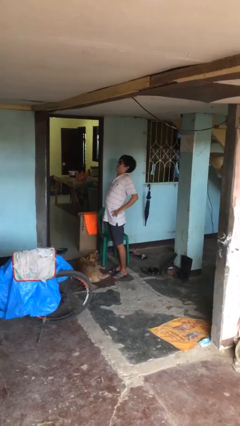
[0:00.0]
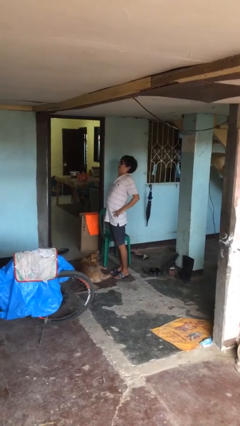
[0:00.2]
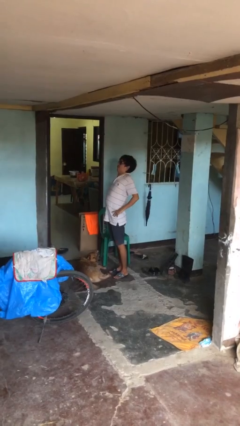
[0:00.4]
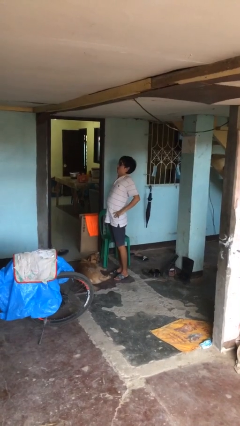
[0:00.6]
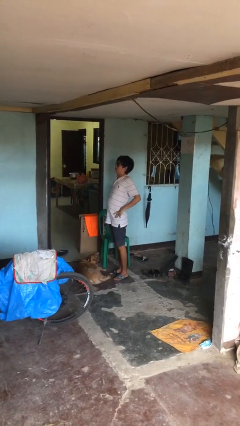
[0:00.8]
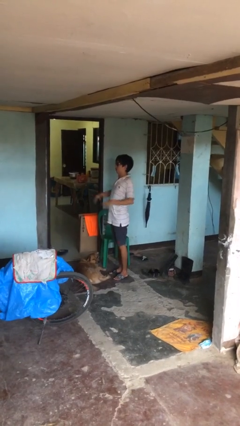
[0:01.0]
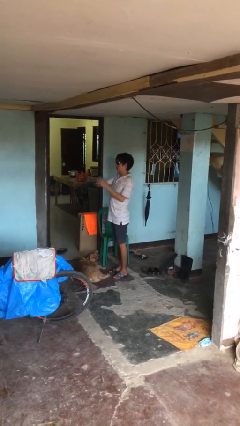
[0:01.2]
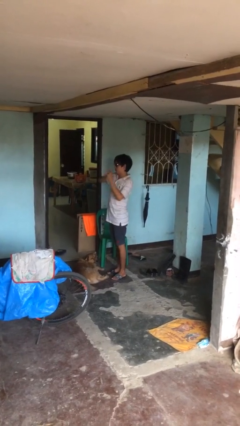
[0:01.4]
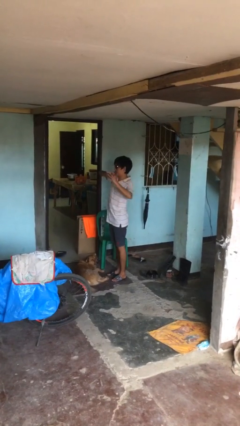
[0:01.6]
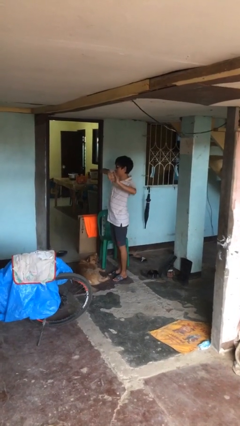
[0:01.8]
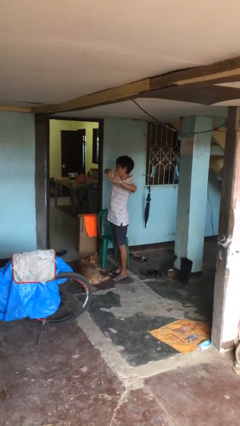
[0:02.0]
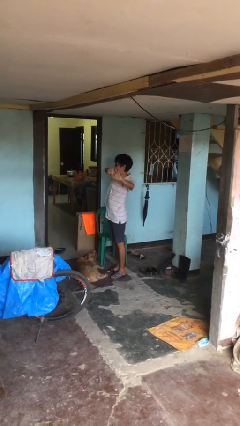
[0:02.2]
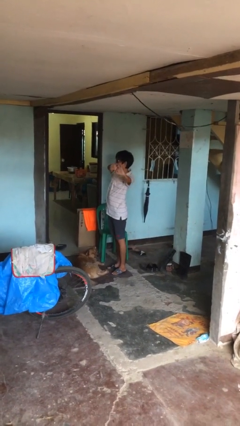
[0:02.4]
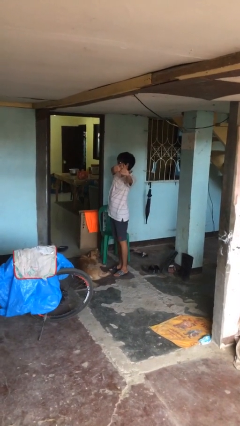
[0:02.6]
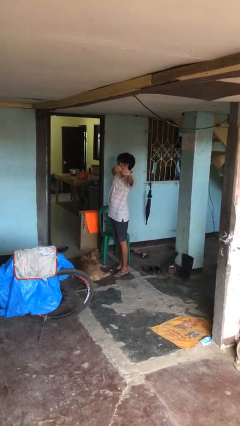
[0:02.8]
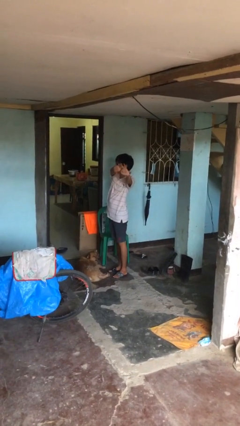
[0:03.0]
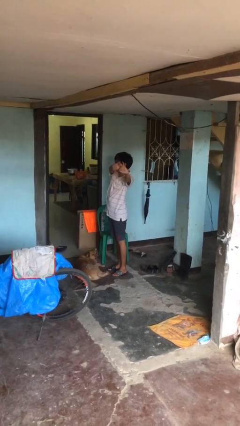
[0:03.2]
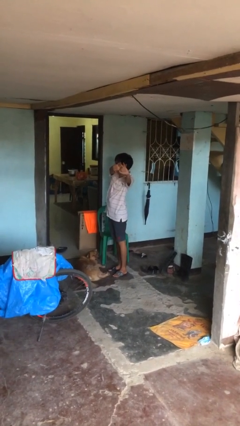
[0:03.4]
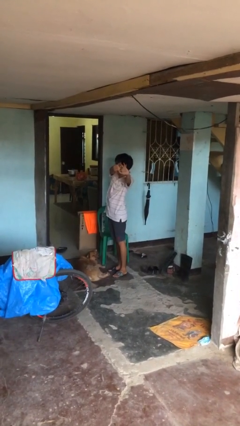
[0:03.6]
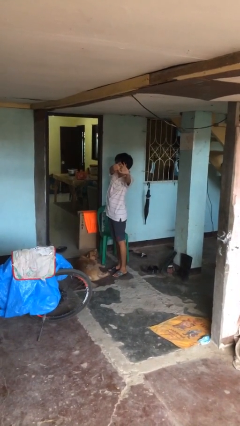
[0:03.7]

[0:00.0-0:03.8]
person stretches arms to side

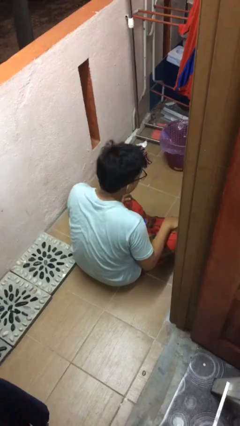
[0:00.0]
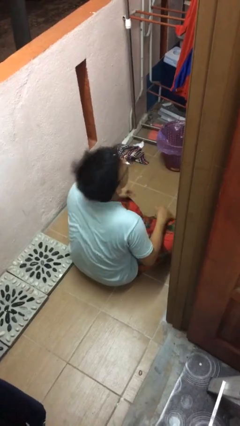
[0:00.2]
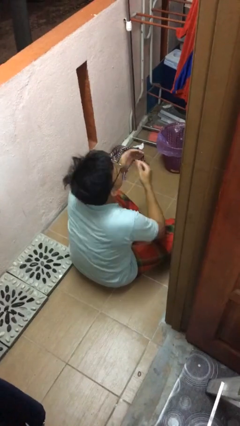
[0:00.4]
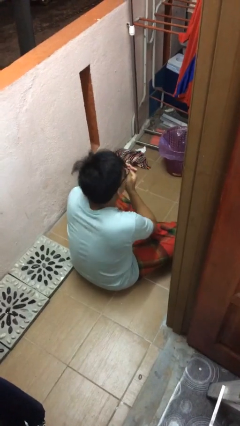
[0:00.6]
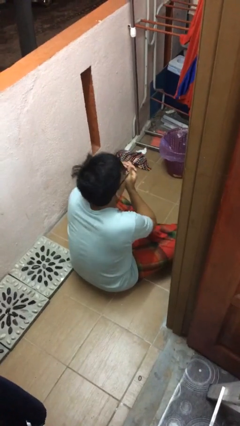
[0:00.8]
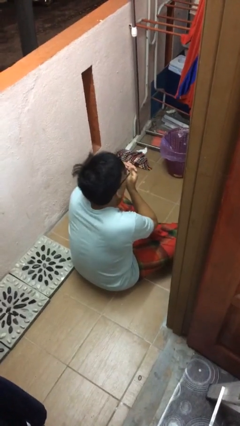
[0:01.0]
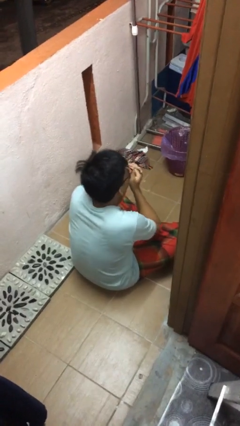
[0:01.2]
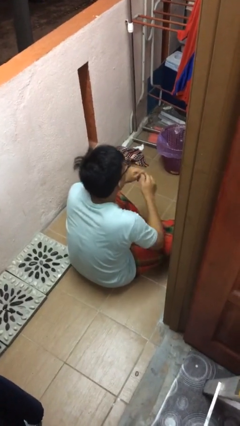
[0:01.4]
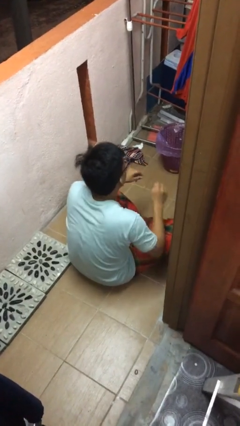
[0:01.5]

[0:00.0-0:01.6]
person sneezes into hand

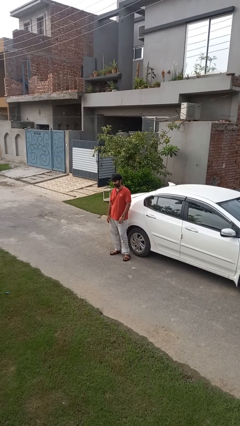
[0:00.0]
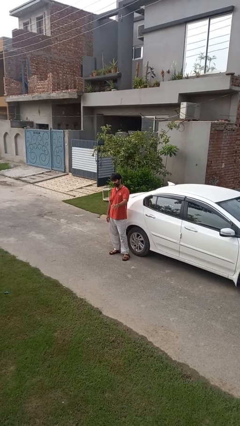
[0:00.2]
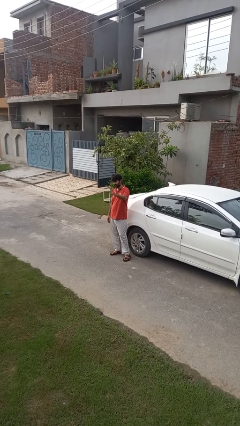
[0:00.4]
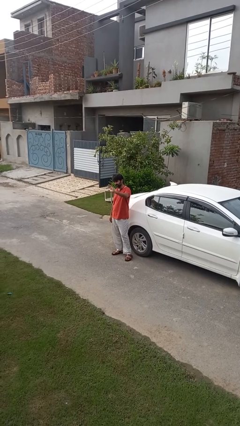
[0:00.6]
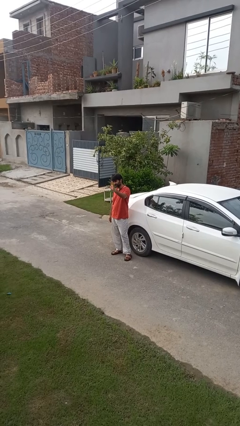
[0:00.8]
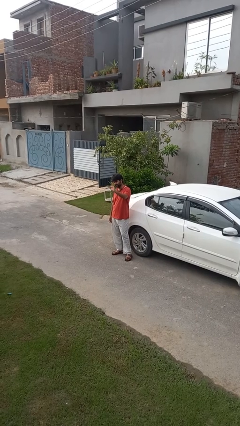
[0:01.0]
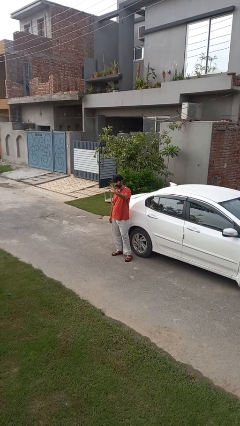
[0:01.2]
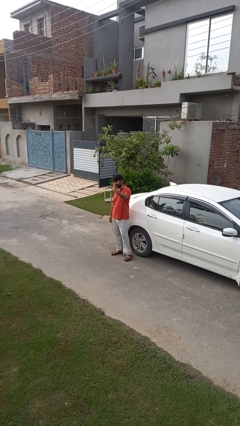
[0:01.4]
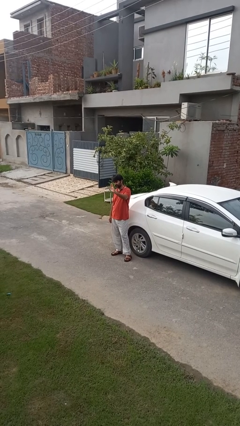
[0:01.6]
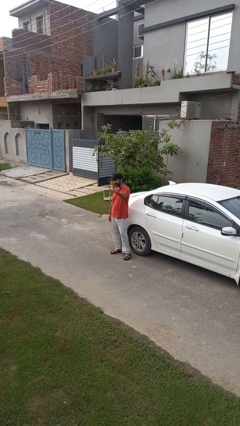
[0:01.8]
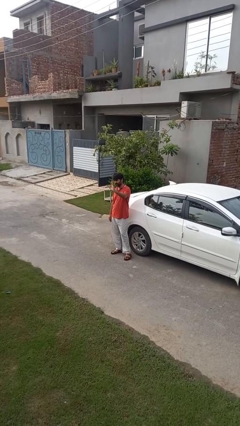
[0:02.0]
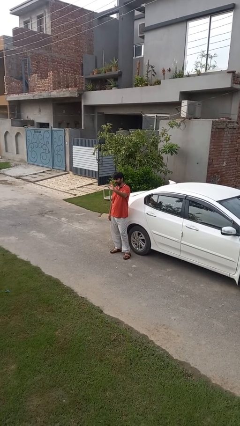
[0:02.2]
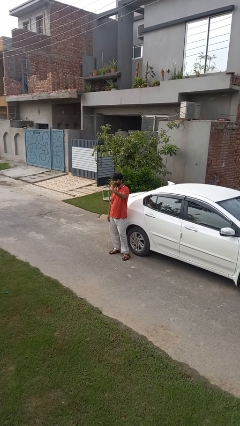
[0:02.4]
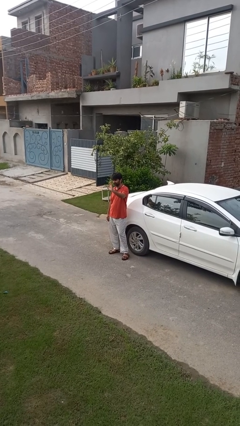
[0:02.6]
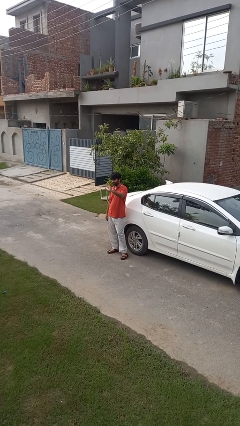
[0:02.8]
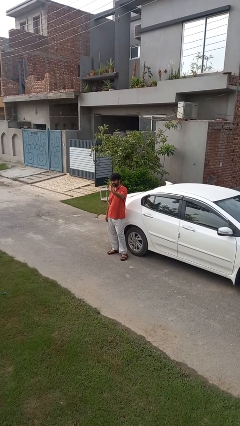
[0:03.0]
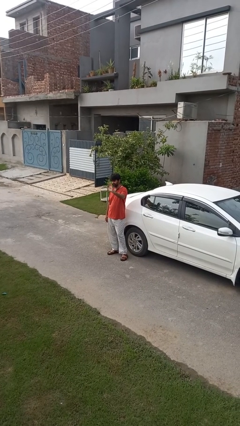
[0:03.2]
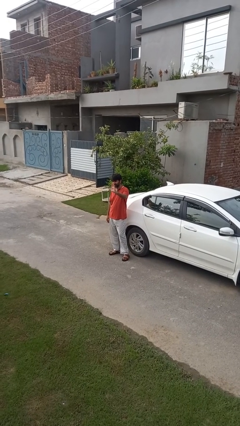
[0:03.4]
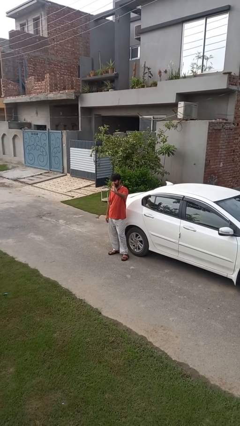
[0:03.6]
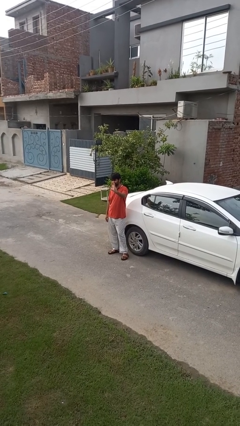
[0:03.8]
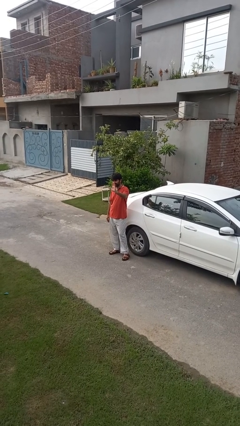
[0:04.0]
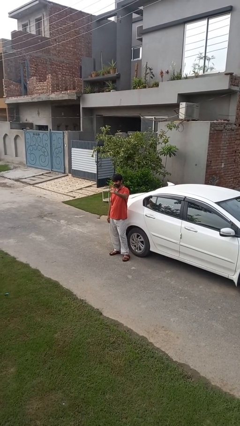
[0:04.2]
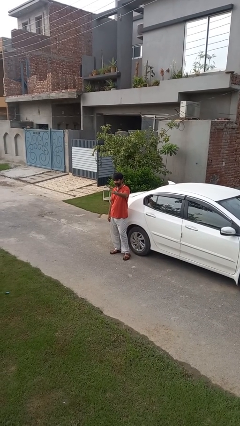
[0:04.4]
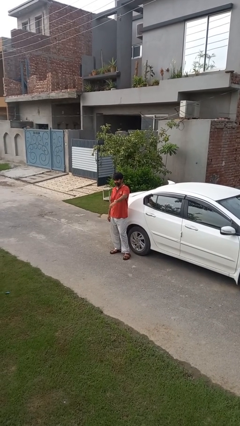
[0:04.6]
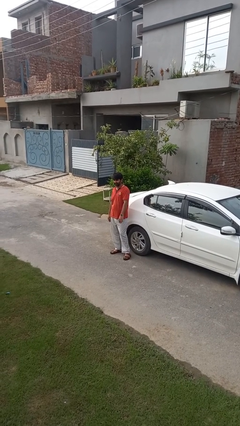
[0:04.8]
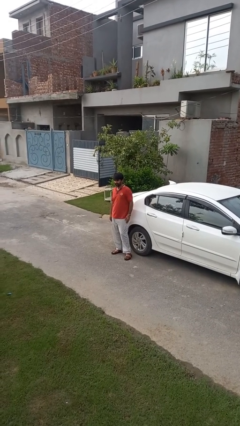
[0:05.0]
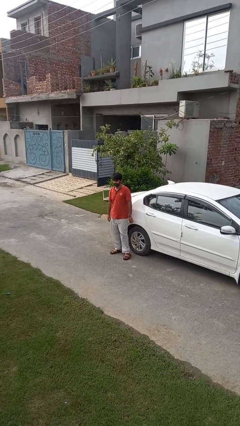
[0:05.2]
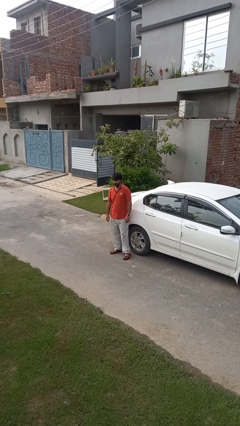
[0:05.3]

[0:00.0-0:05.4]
person waves at person

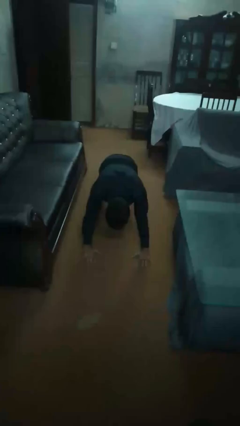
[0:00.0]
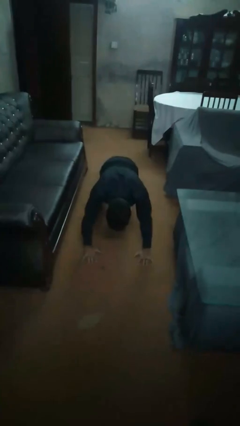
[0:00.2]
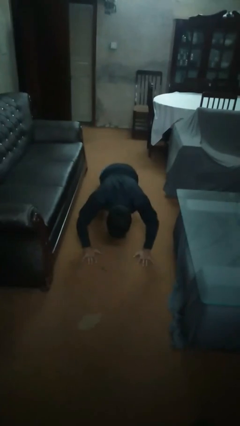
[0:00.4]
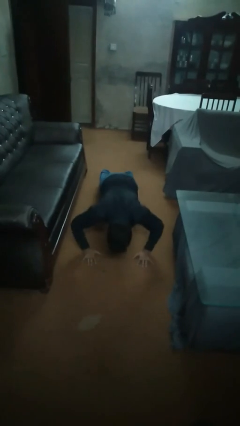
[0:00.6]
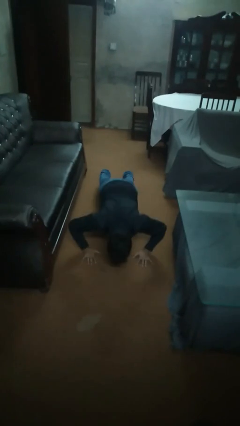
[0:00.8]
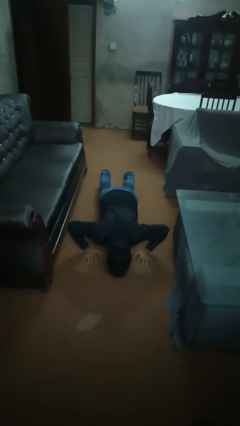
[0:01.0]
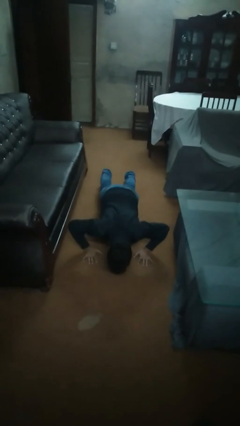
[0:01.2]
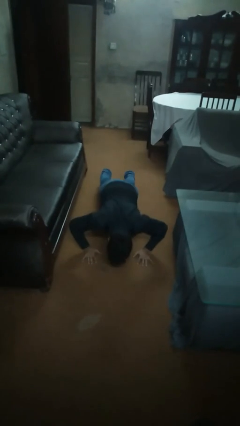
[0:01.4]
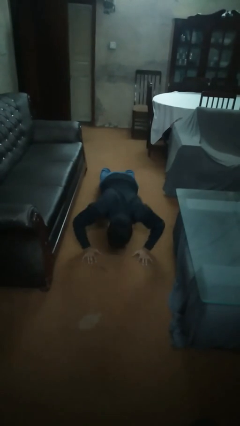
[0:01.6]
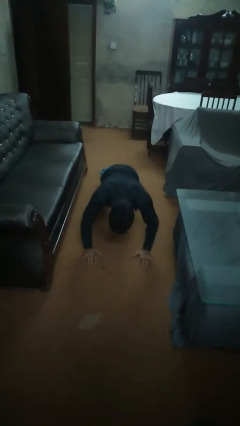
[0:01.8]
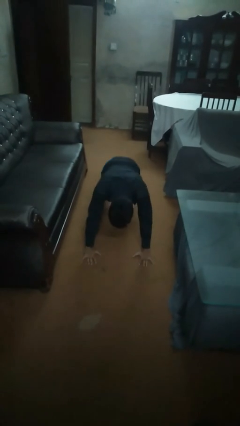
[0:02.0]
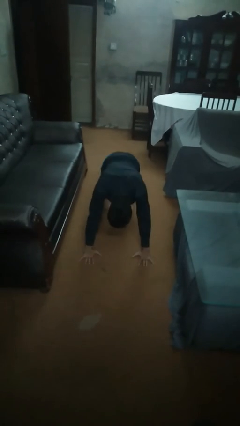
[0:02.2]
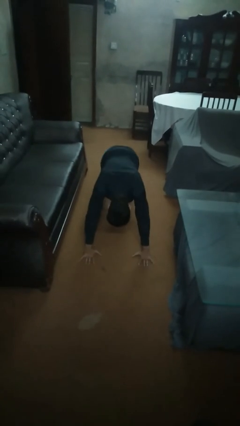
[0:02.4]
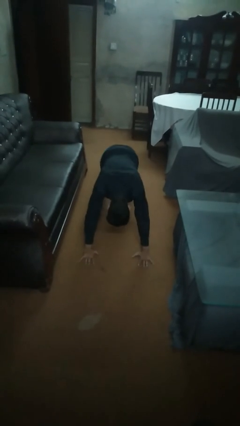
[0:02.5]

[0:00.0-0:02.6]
person exercises with pushup

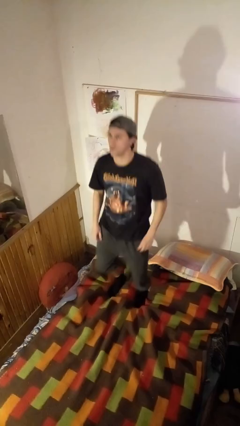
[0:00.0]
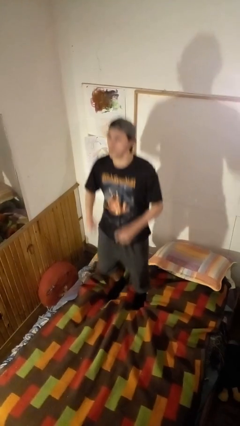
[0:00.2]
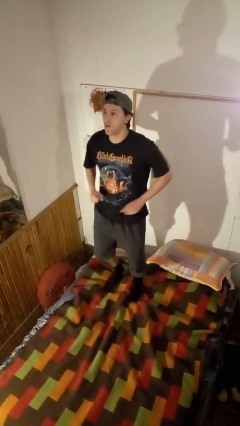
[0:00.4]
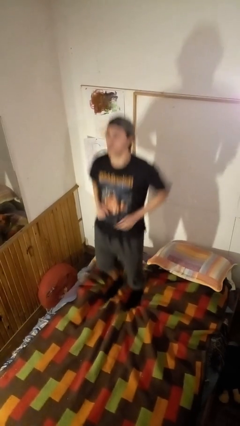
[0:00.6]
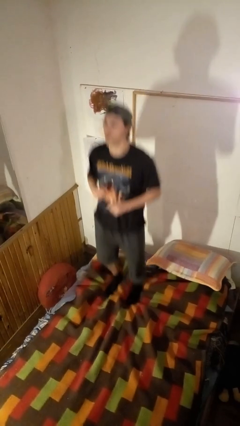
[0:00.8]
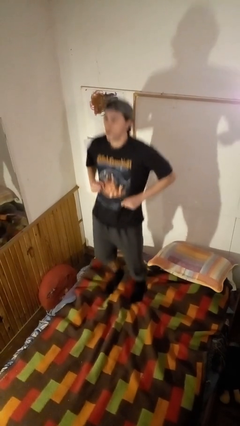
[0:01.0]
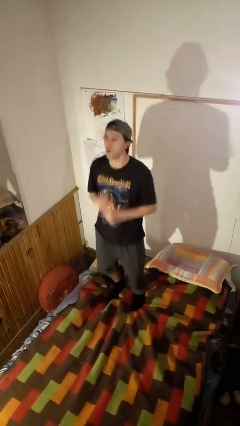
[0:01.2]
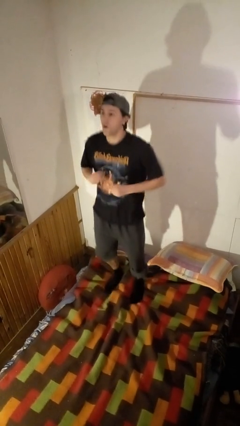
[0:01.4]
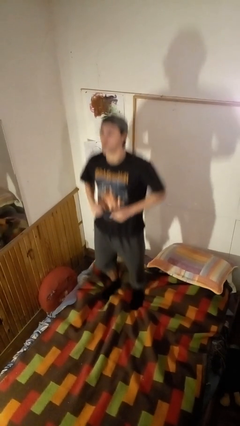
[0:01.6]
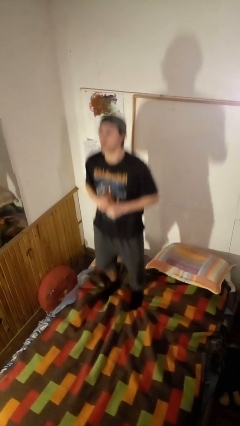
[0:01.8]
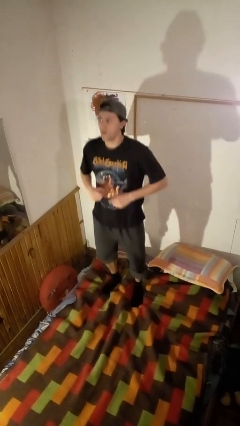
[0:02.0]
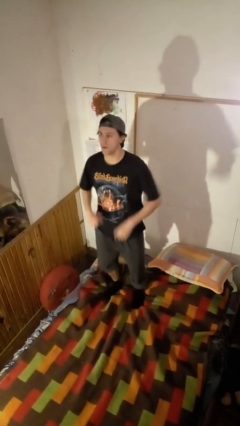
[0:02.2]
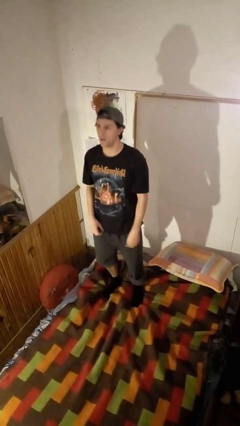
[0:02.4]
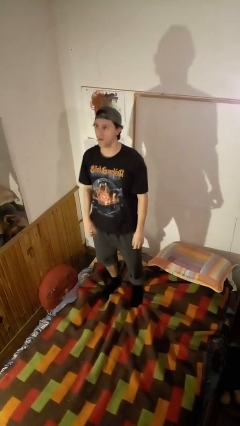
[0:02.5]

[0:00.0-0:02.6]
person jumps on bed

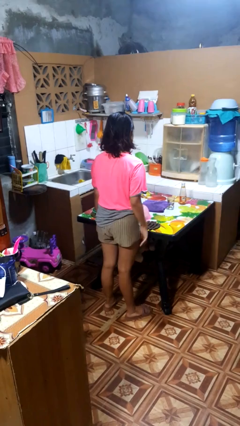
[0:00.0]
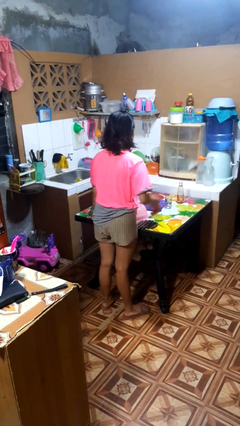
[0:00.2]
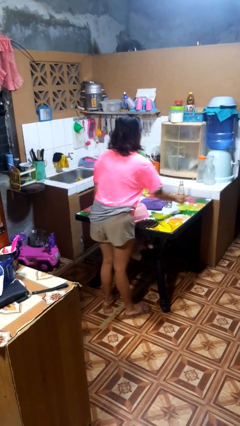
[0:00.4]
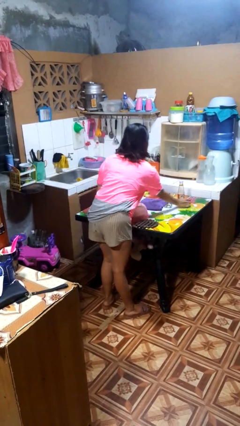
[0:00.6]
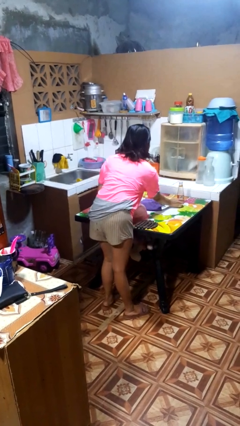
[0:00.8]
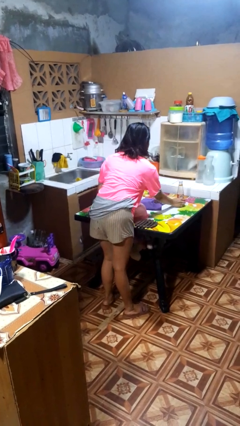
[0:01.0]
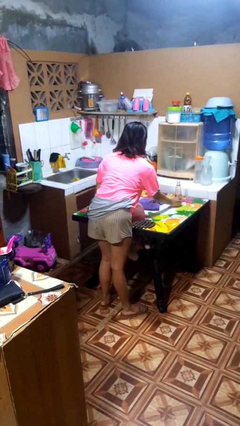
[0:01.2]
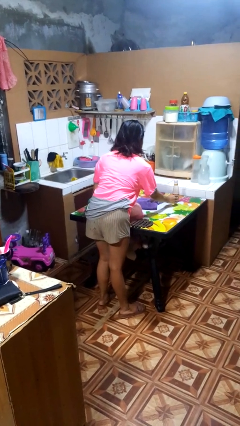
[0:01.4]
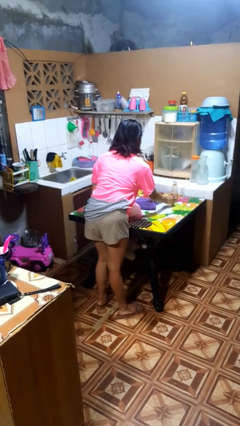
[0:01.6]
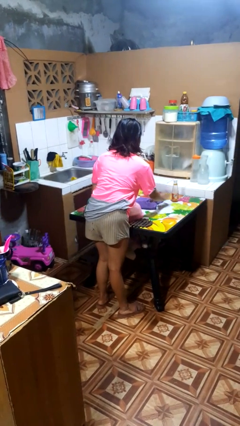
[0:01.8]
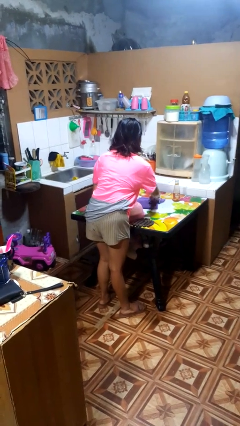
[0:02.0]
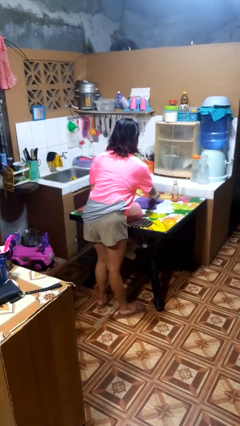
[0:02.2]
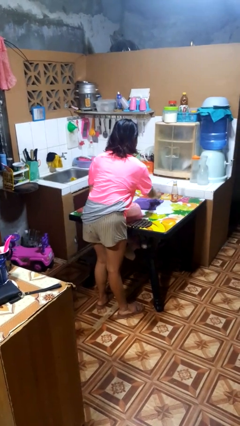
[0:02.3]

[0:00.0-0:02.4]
person knocks over glass
